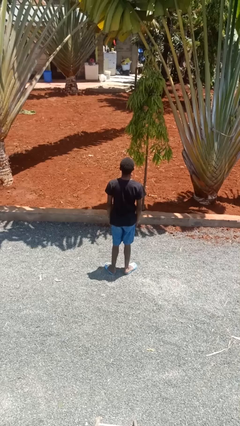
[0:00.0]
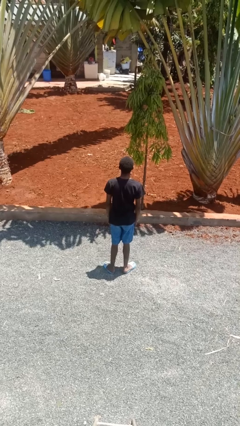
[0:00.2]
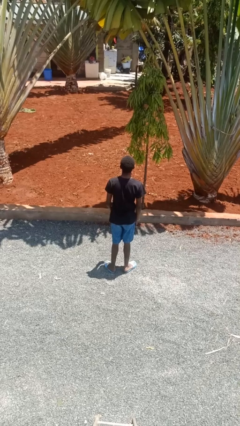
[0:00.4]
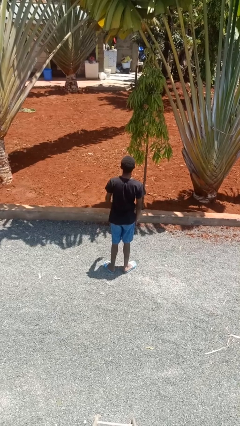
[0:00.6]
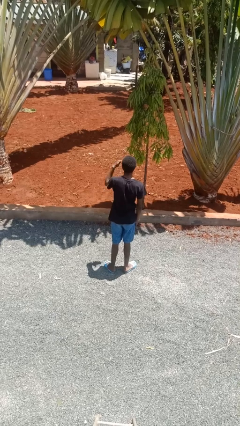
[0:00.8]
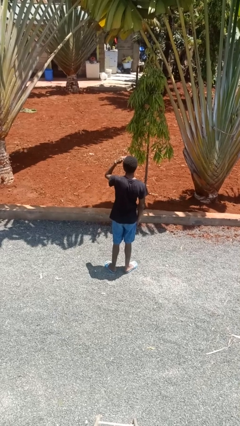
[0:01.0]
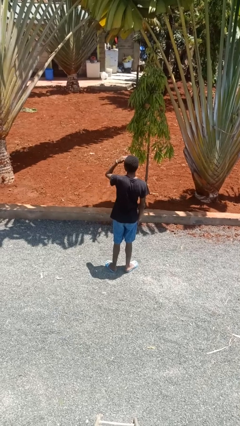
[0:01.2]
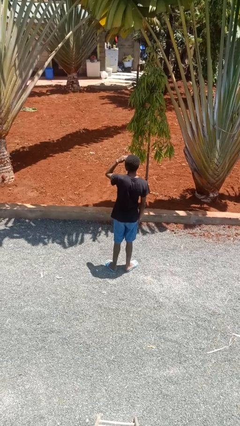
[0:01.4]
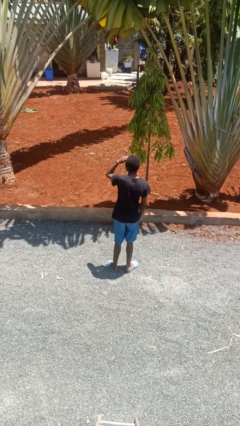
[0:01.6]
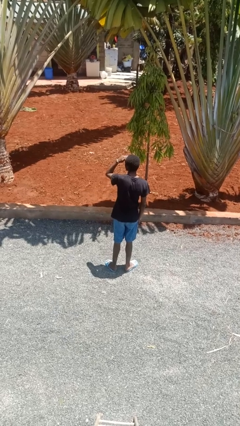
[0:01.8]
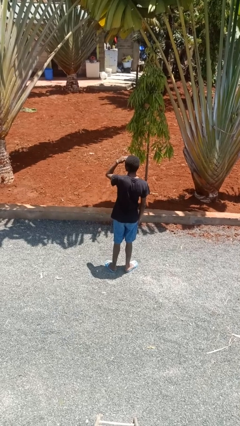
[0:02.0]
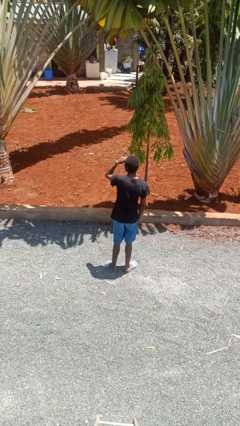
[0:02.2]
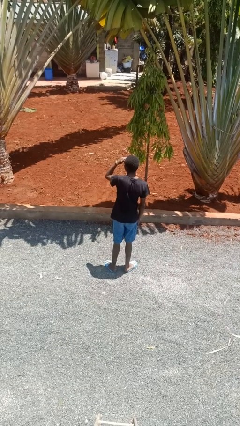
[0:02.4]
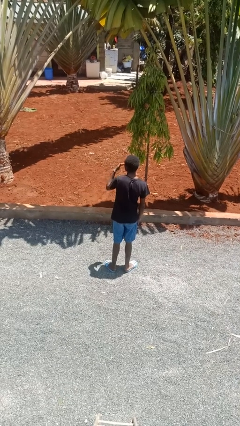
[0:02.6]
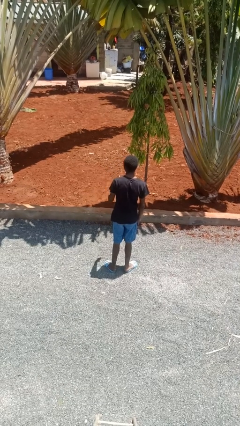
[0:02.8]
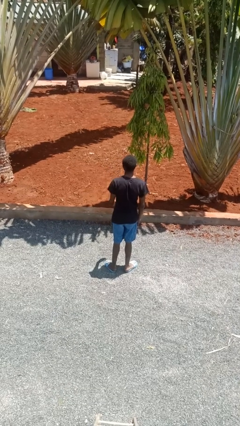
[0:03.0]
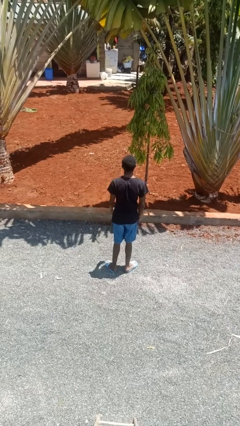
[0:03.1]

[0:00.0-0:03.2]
person shades eyes

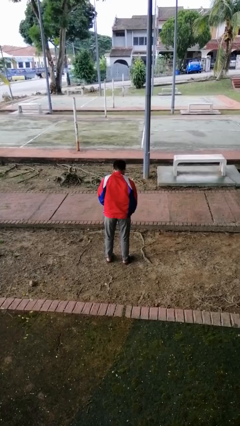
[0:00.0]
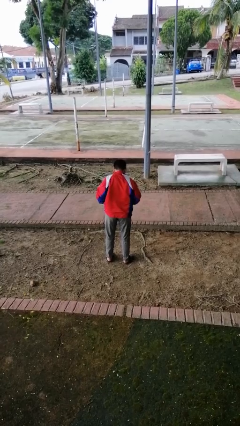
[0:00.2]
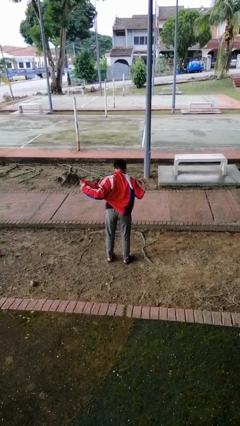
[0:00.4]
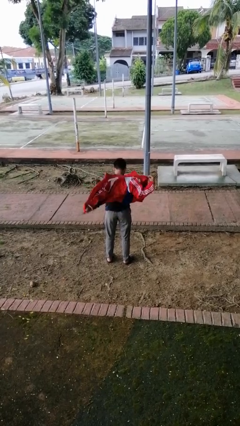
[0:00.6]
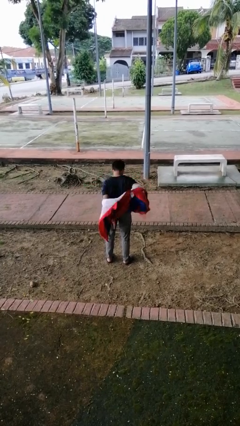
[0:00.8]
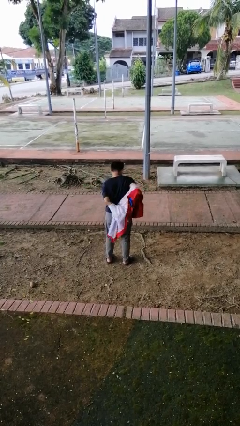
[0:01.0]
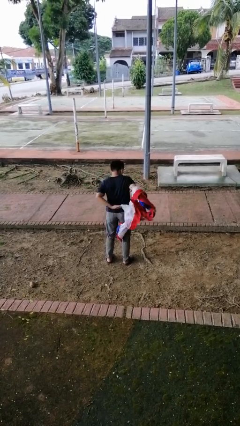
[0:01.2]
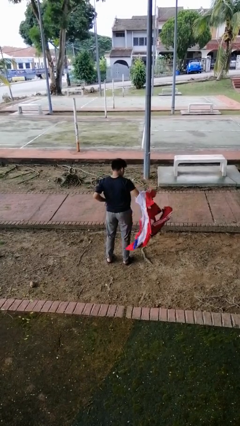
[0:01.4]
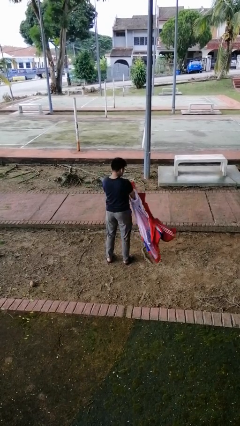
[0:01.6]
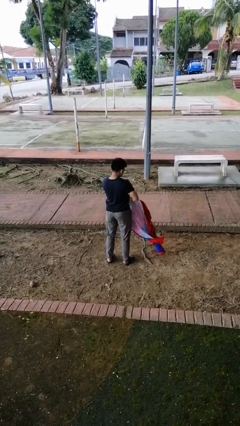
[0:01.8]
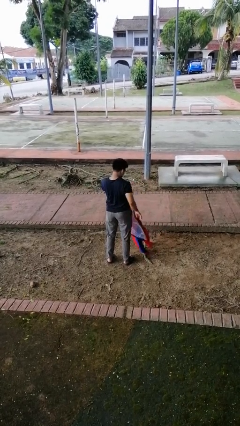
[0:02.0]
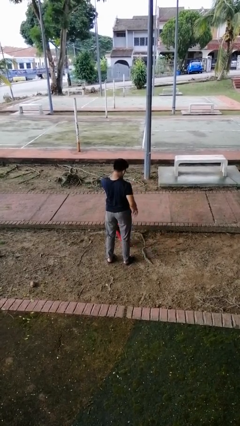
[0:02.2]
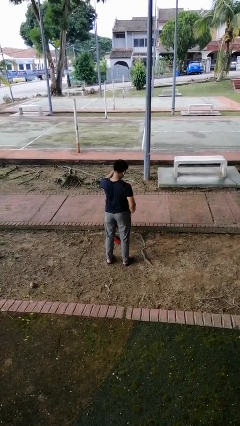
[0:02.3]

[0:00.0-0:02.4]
person takes off jacket

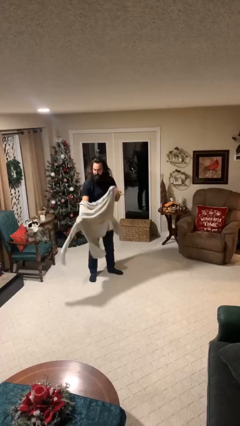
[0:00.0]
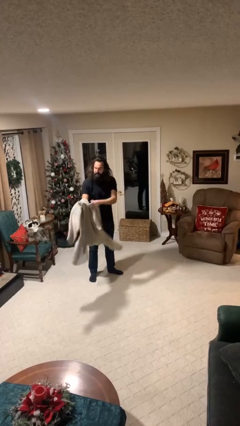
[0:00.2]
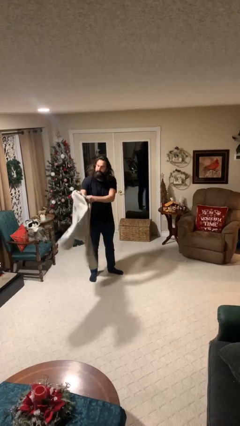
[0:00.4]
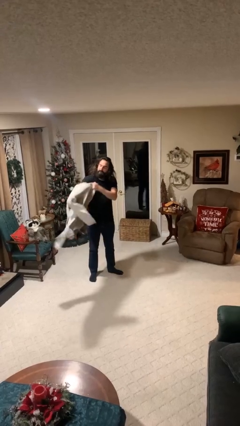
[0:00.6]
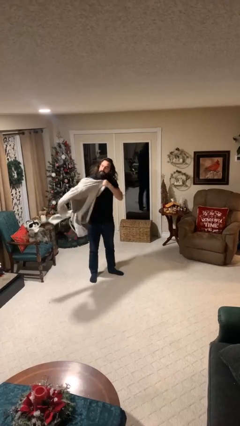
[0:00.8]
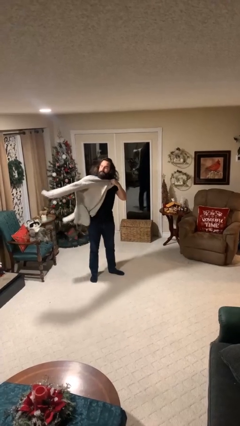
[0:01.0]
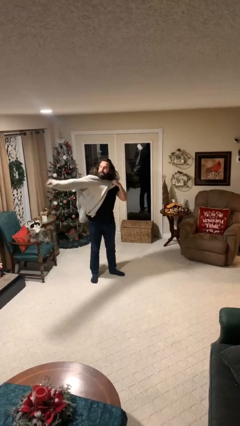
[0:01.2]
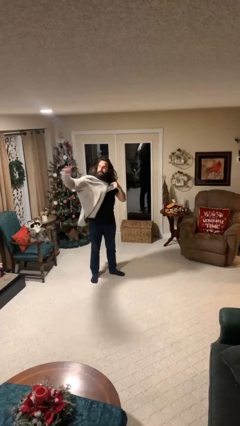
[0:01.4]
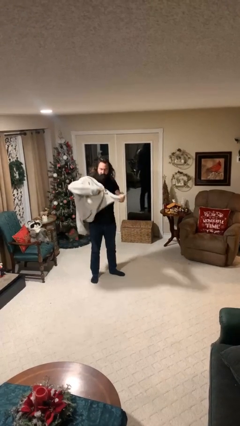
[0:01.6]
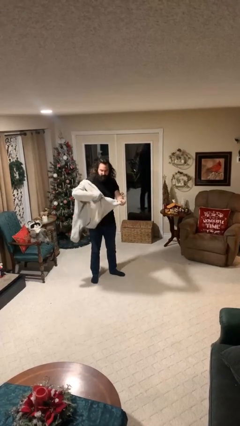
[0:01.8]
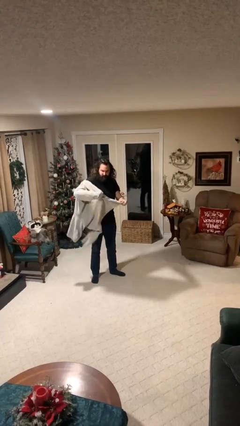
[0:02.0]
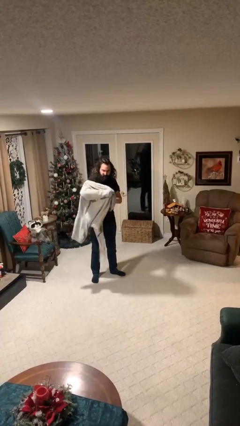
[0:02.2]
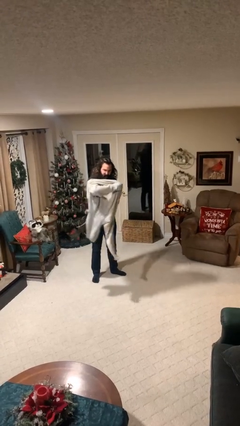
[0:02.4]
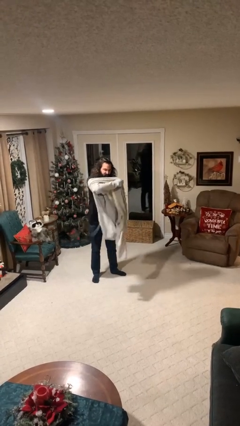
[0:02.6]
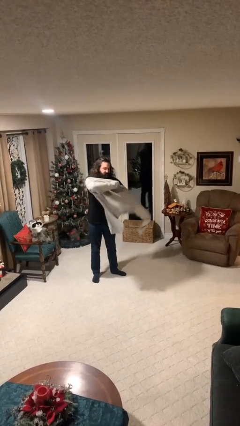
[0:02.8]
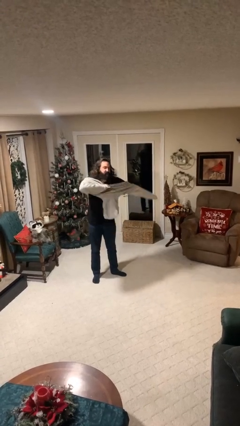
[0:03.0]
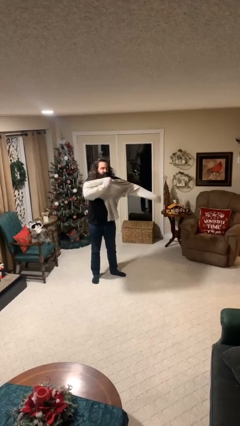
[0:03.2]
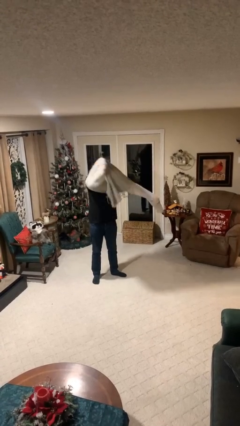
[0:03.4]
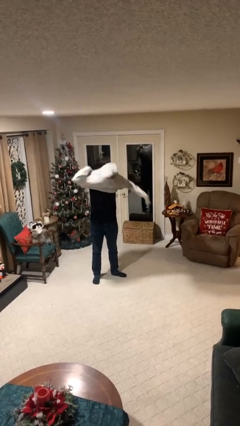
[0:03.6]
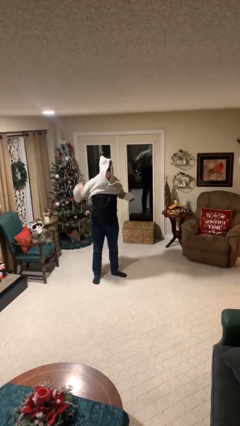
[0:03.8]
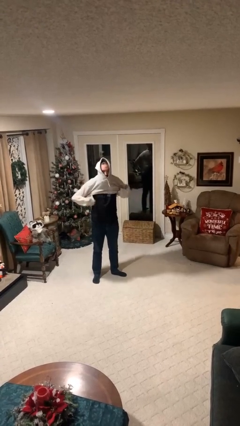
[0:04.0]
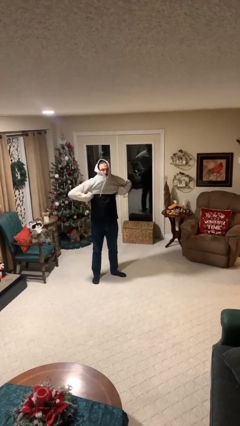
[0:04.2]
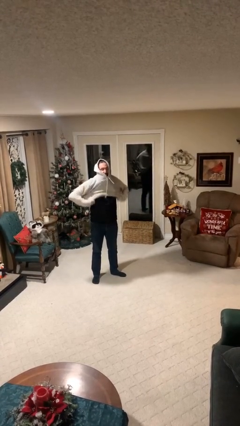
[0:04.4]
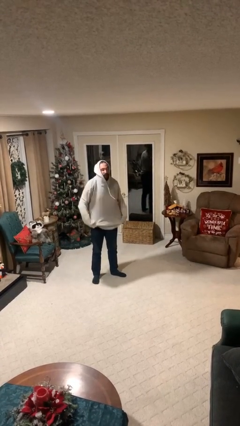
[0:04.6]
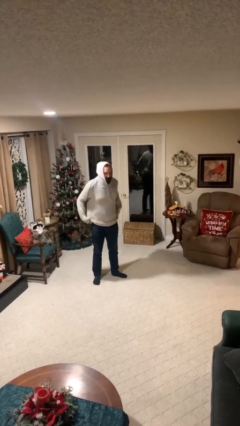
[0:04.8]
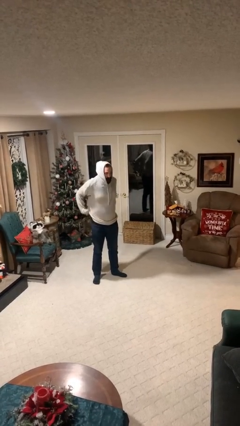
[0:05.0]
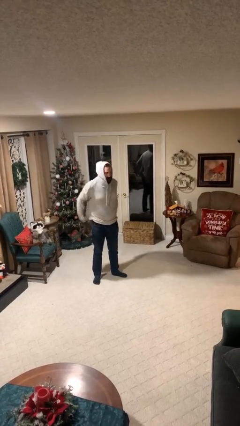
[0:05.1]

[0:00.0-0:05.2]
person puts on hoodie

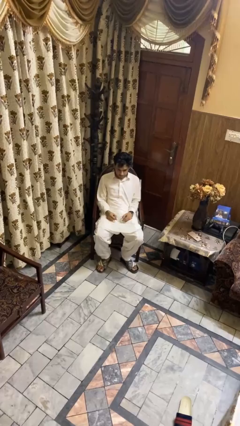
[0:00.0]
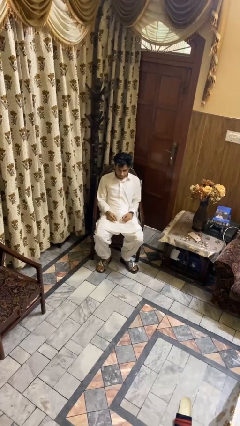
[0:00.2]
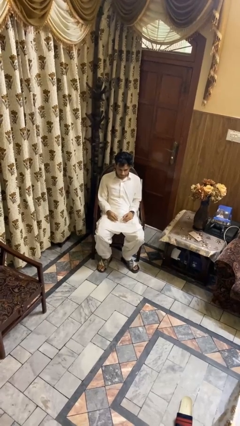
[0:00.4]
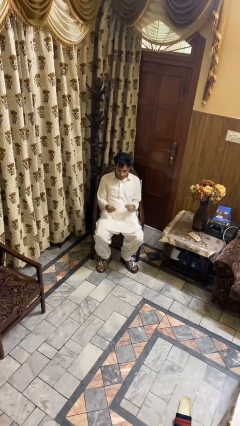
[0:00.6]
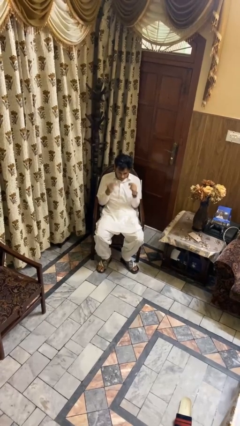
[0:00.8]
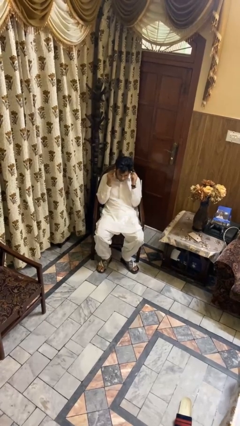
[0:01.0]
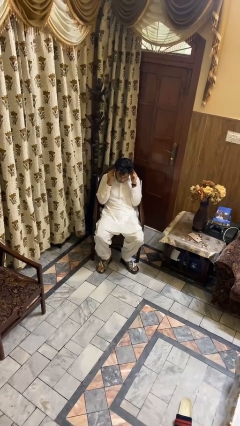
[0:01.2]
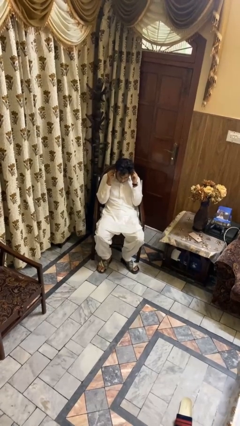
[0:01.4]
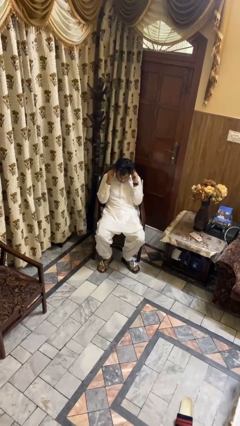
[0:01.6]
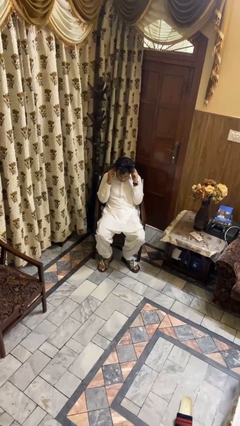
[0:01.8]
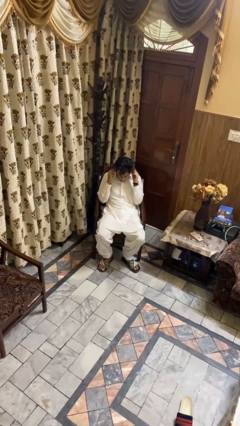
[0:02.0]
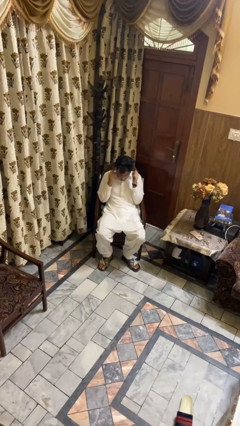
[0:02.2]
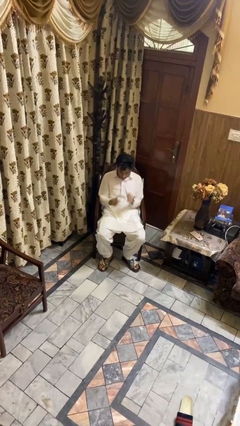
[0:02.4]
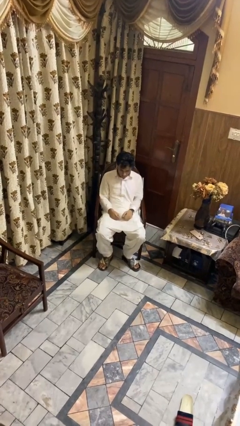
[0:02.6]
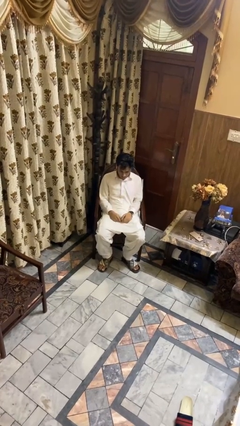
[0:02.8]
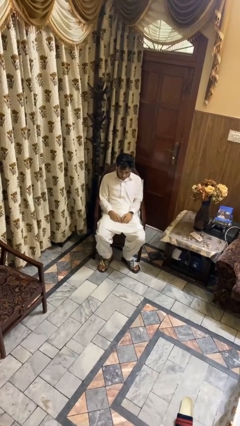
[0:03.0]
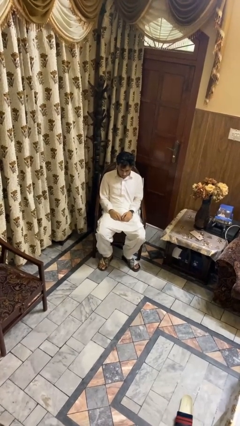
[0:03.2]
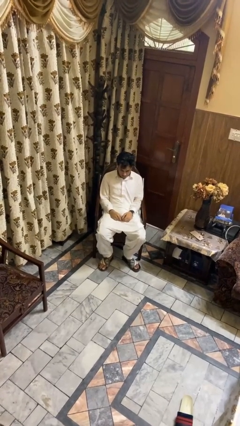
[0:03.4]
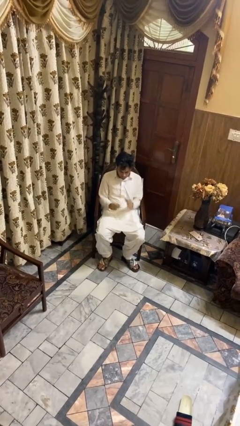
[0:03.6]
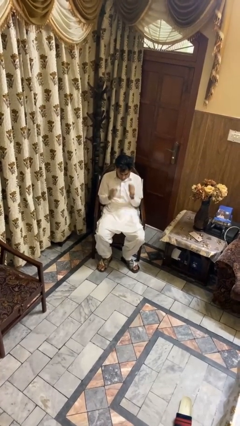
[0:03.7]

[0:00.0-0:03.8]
person puts on headphones

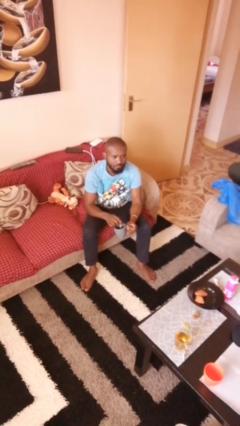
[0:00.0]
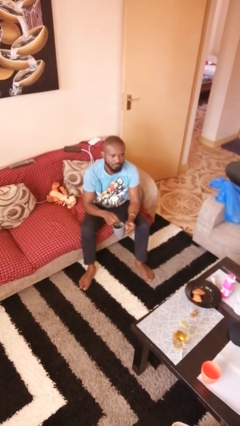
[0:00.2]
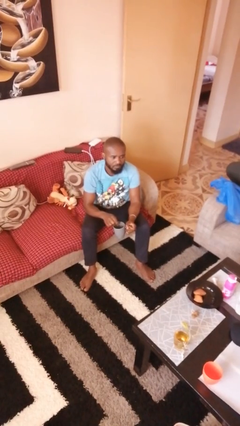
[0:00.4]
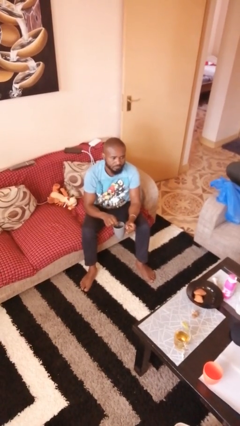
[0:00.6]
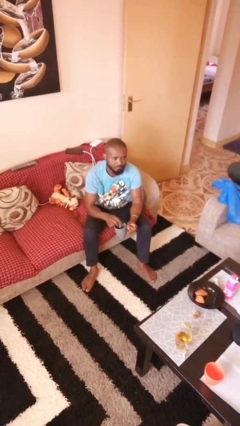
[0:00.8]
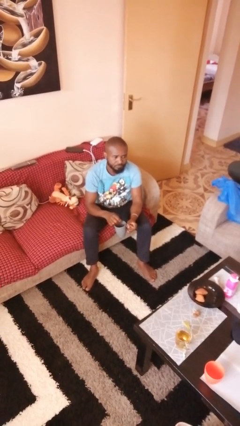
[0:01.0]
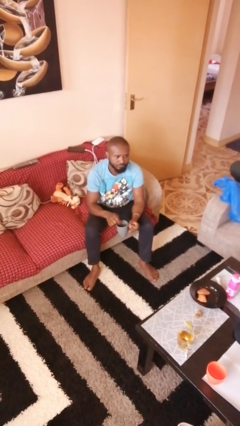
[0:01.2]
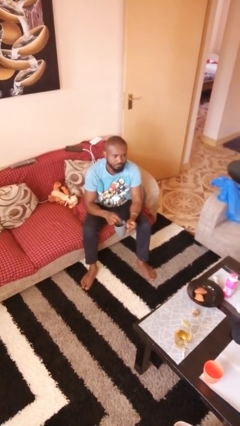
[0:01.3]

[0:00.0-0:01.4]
person stirs mug

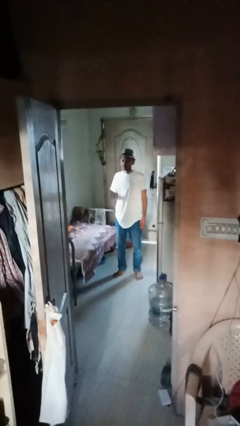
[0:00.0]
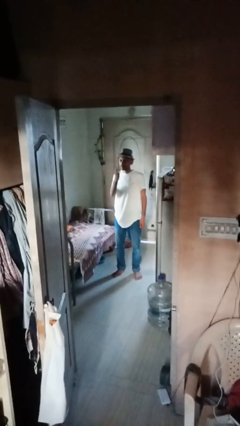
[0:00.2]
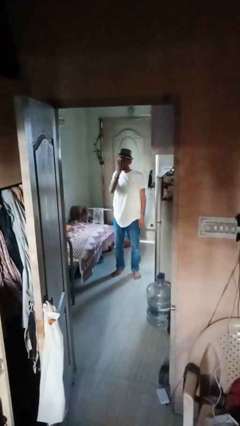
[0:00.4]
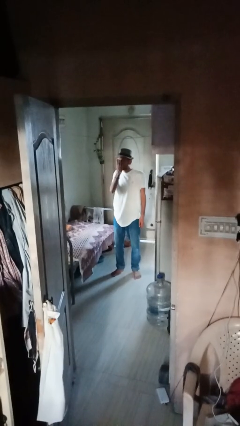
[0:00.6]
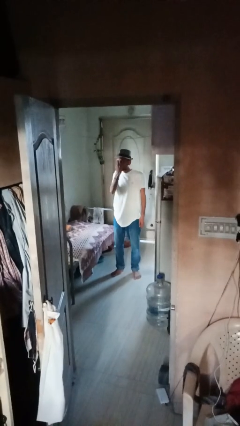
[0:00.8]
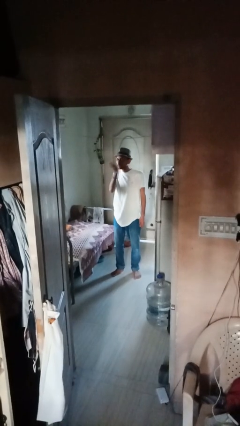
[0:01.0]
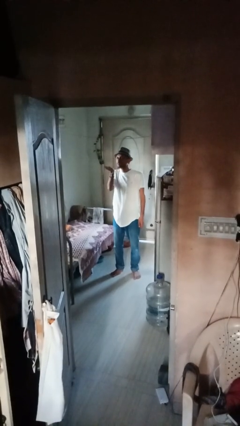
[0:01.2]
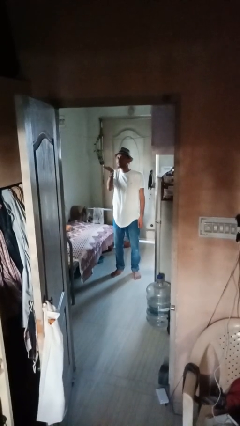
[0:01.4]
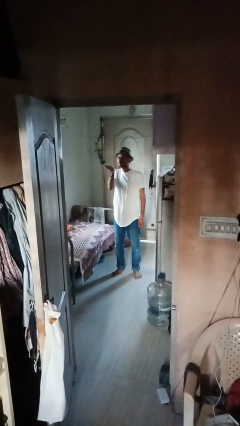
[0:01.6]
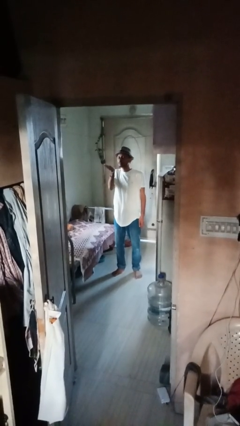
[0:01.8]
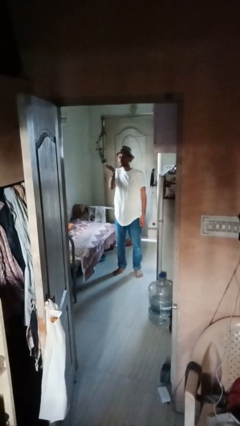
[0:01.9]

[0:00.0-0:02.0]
person gestures blow kiss
